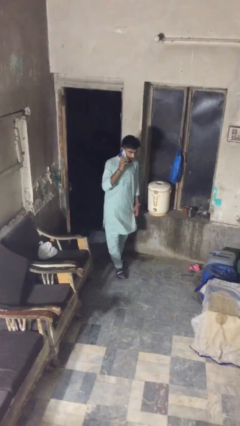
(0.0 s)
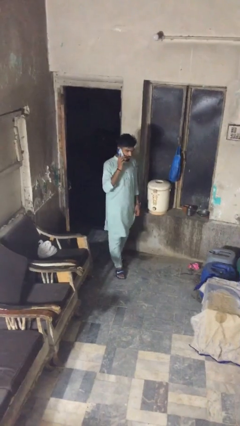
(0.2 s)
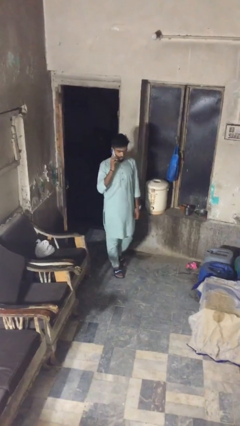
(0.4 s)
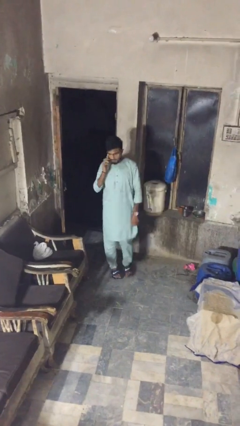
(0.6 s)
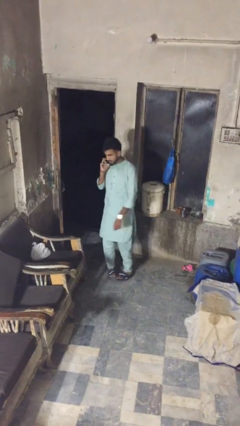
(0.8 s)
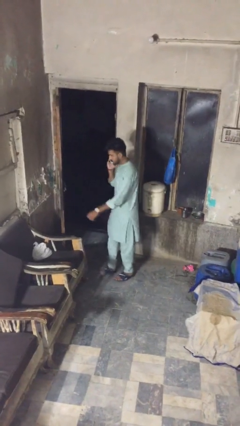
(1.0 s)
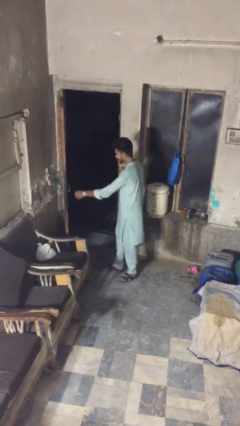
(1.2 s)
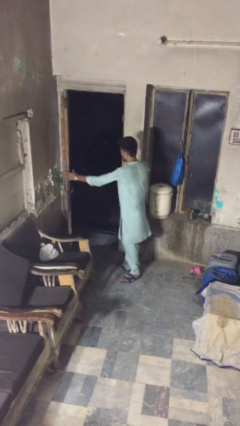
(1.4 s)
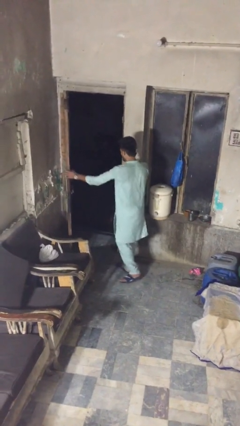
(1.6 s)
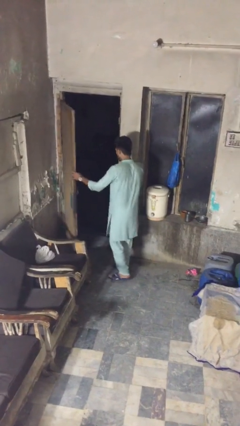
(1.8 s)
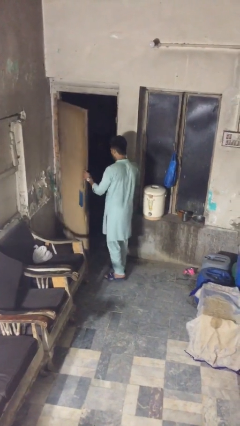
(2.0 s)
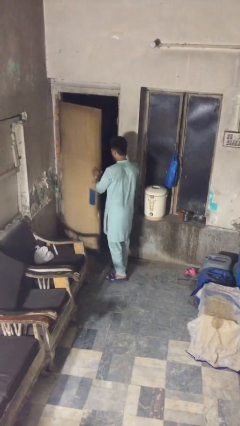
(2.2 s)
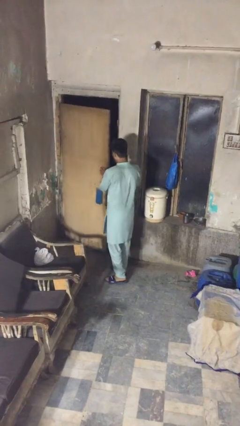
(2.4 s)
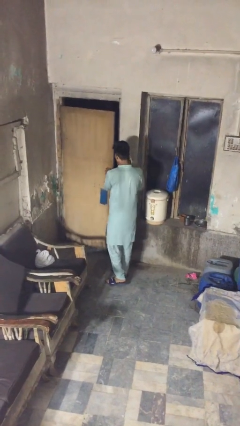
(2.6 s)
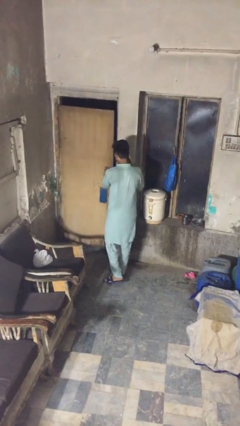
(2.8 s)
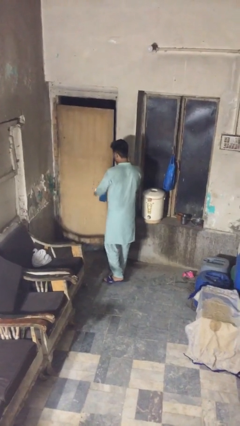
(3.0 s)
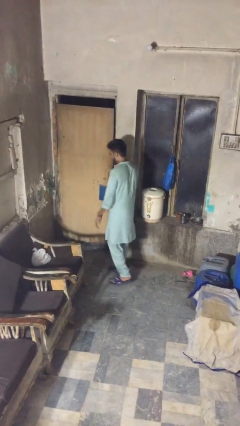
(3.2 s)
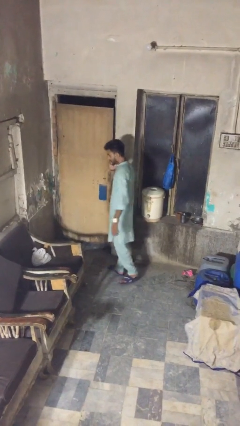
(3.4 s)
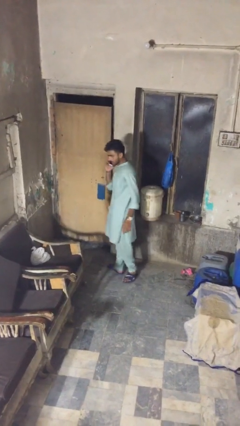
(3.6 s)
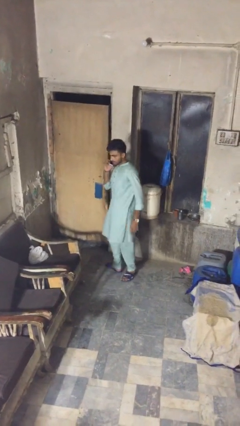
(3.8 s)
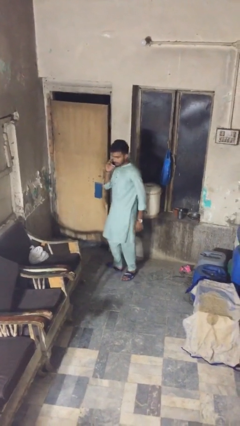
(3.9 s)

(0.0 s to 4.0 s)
person closes facility door

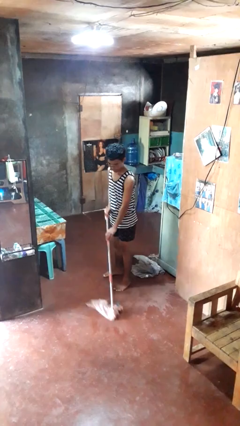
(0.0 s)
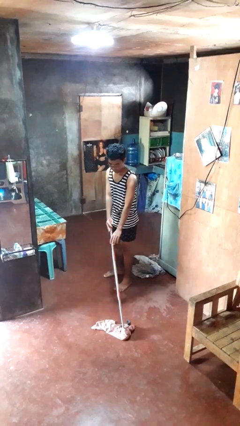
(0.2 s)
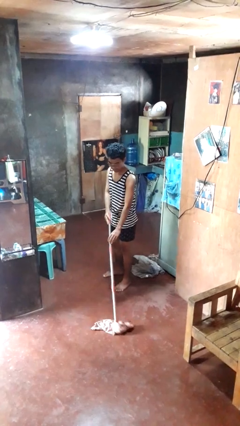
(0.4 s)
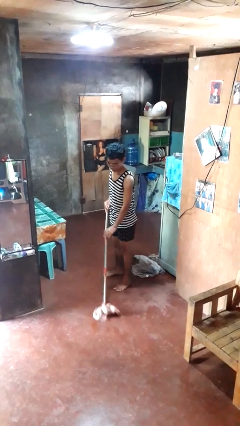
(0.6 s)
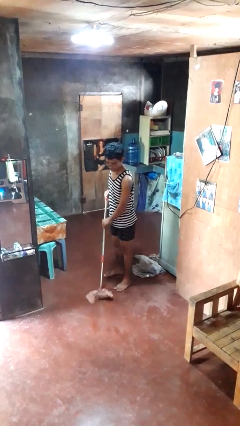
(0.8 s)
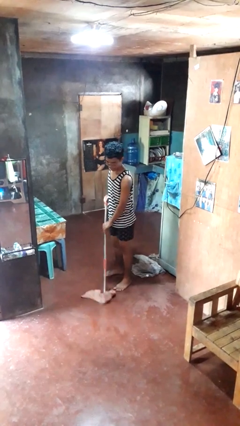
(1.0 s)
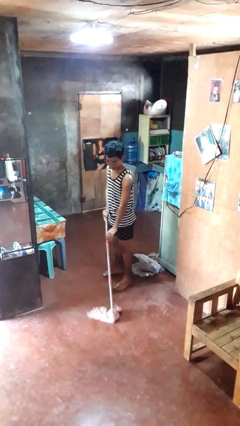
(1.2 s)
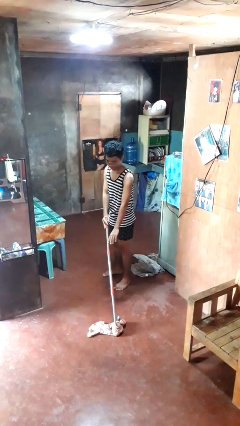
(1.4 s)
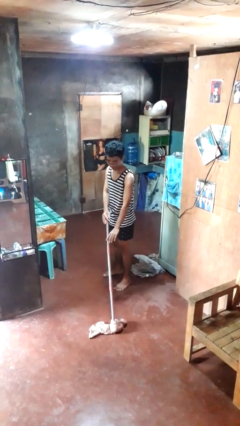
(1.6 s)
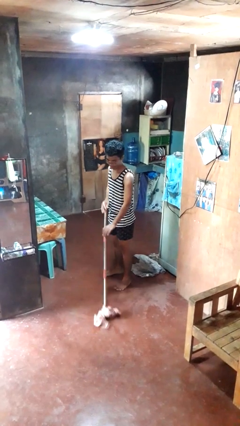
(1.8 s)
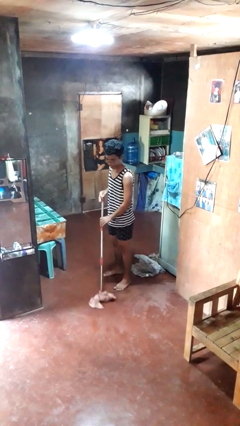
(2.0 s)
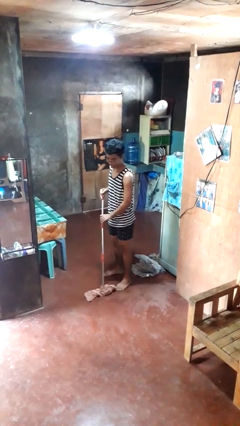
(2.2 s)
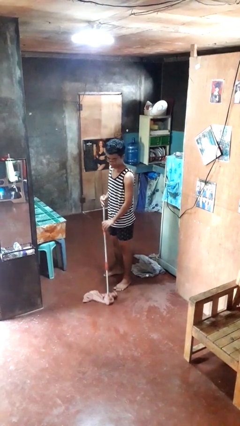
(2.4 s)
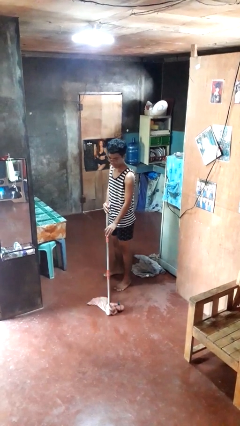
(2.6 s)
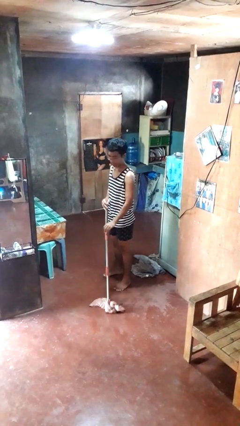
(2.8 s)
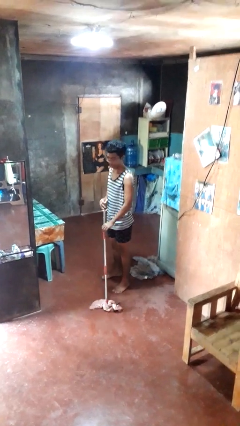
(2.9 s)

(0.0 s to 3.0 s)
person mops

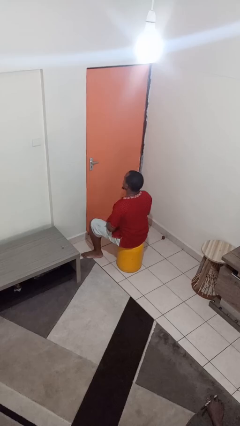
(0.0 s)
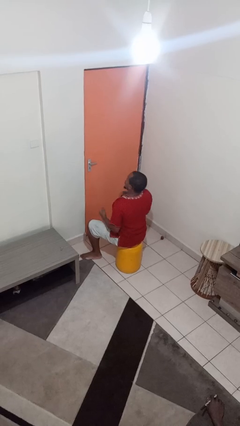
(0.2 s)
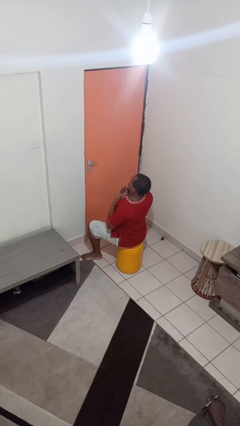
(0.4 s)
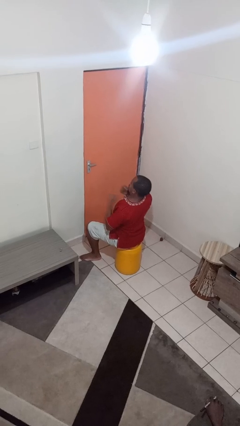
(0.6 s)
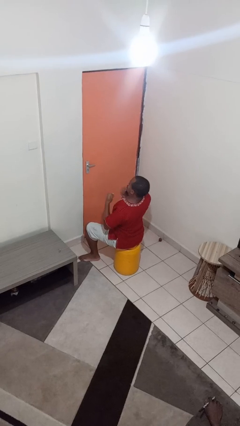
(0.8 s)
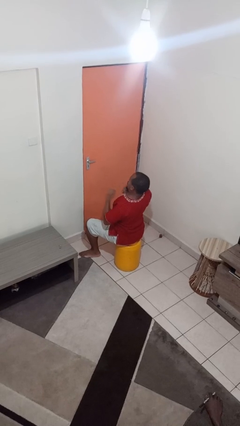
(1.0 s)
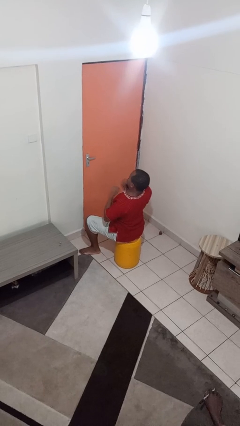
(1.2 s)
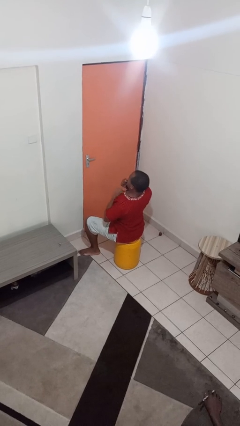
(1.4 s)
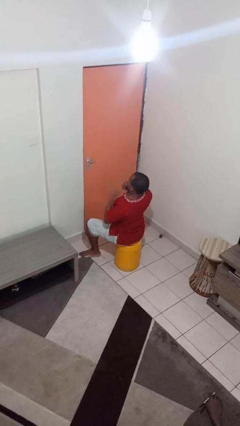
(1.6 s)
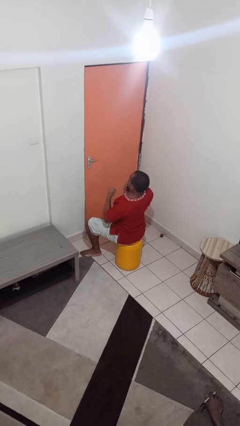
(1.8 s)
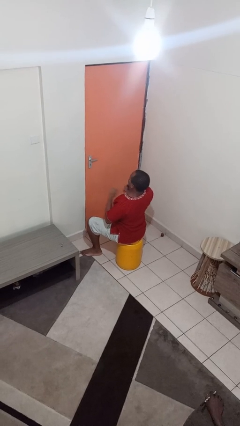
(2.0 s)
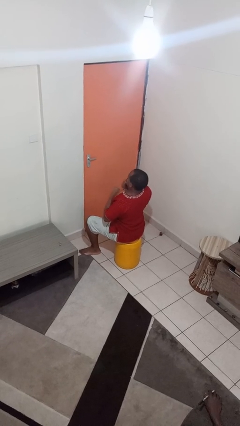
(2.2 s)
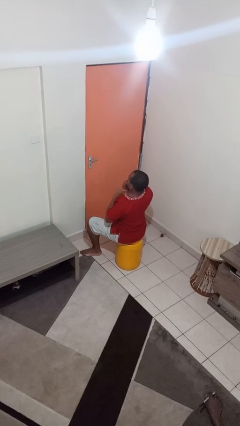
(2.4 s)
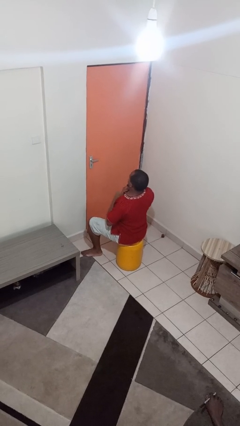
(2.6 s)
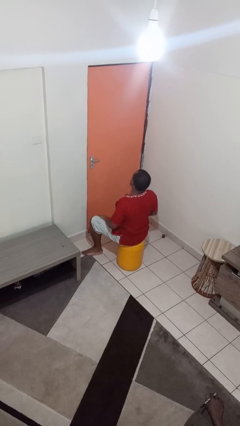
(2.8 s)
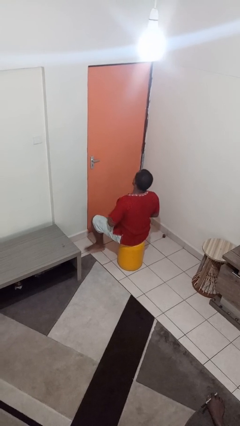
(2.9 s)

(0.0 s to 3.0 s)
person drums on chest

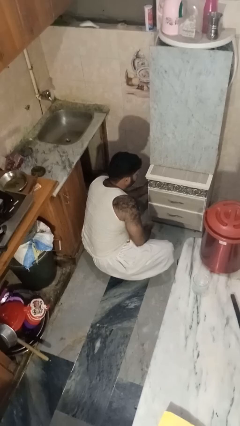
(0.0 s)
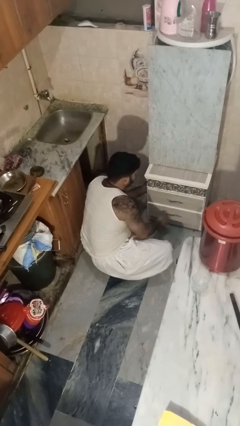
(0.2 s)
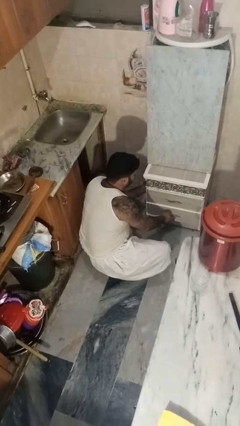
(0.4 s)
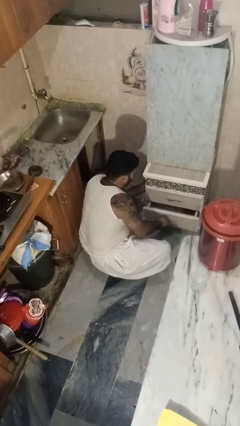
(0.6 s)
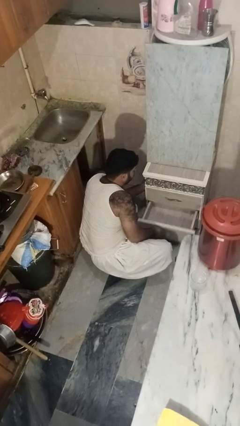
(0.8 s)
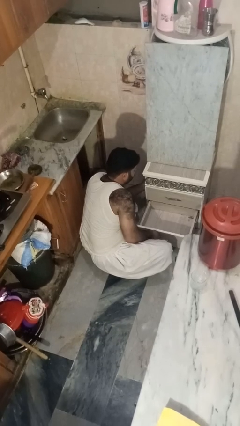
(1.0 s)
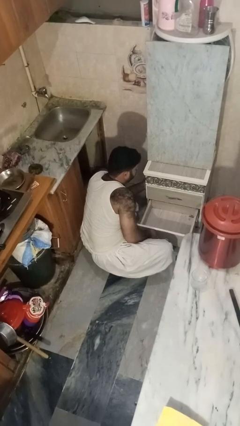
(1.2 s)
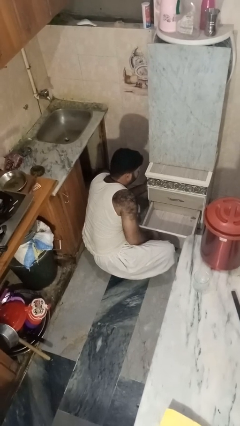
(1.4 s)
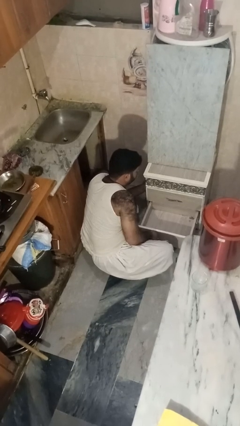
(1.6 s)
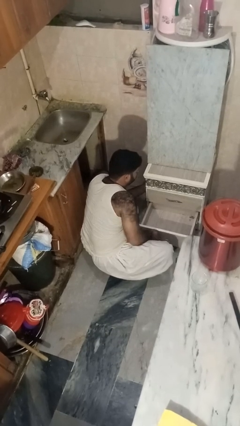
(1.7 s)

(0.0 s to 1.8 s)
person opens kitchen drawer

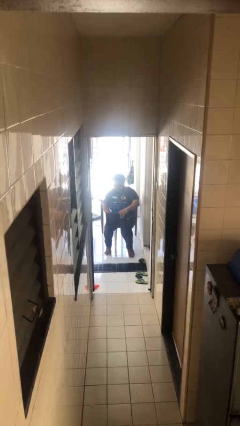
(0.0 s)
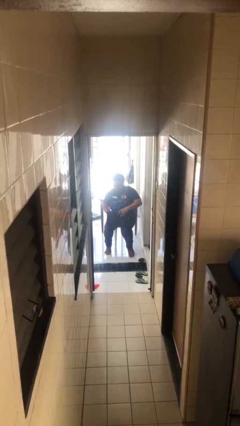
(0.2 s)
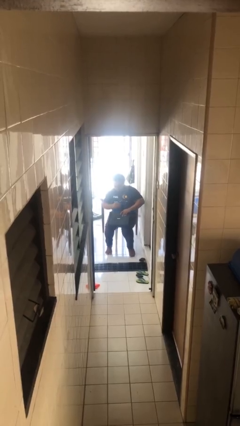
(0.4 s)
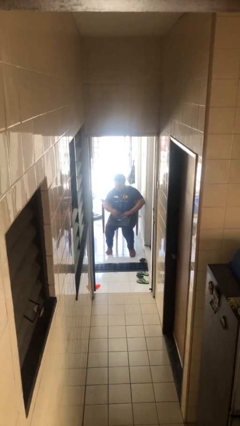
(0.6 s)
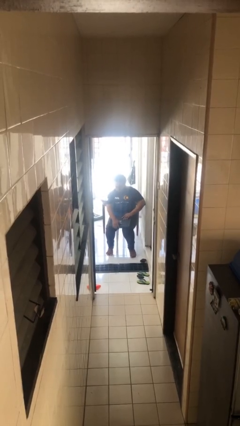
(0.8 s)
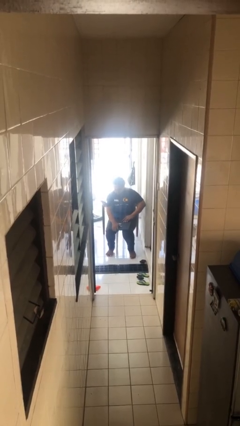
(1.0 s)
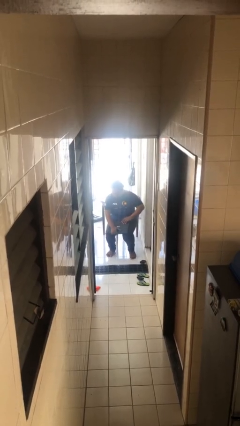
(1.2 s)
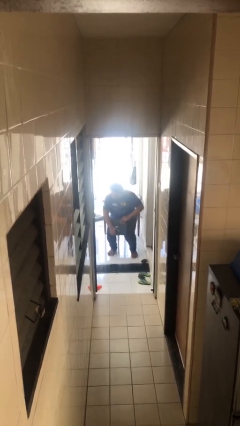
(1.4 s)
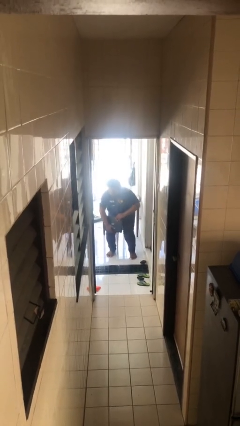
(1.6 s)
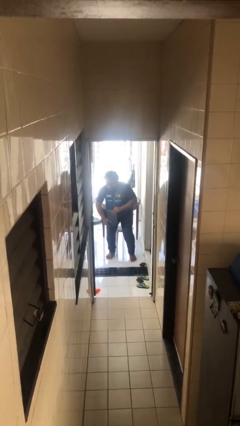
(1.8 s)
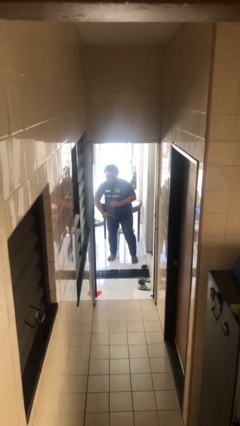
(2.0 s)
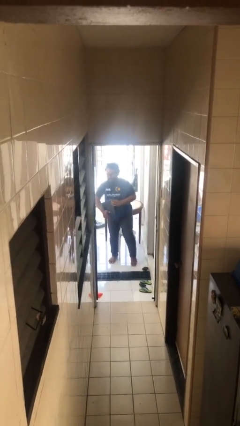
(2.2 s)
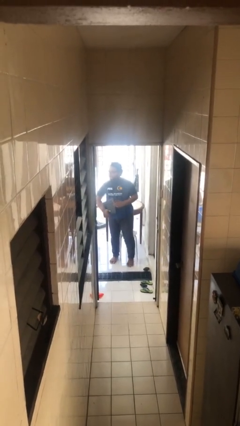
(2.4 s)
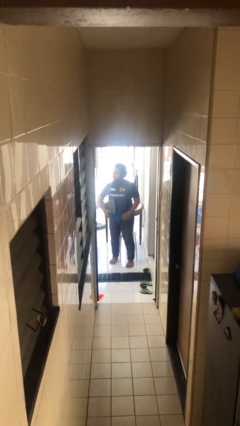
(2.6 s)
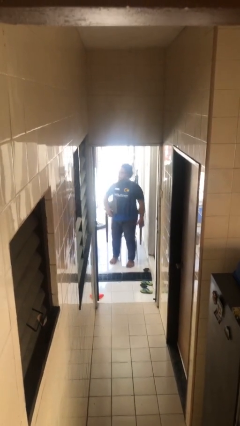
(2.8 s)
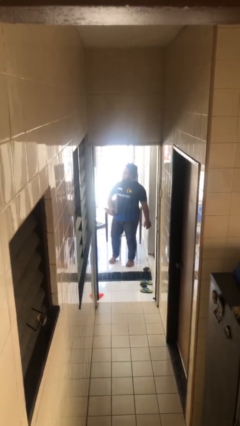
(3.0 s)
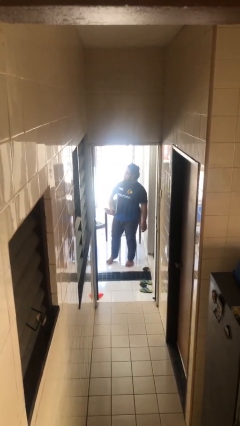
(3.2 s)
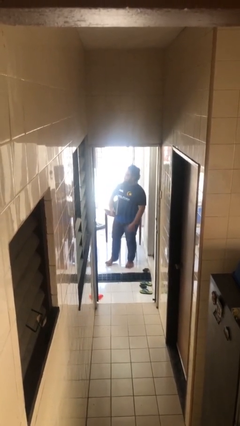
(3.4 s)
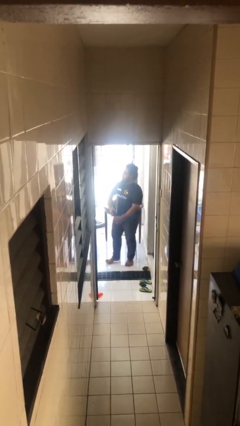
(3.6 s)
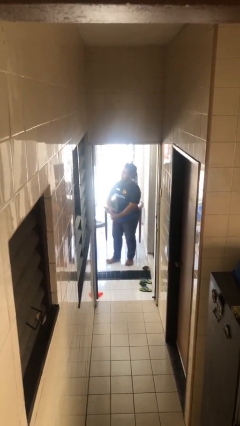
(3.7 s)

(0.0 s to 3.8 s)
person stands up

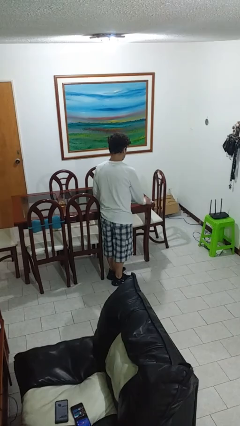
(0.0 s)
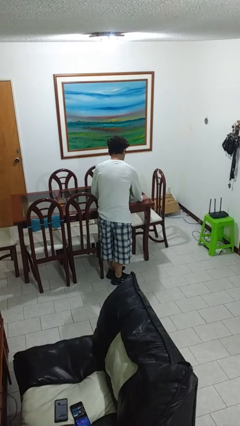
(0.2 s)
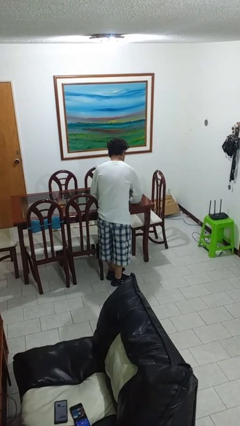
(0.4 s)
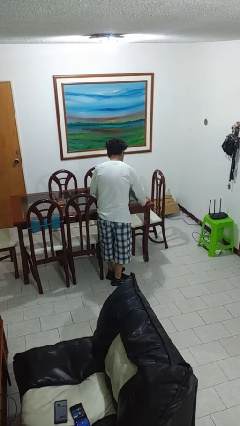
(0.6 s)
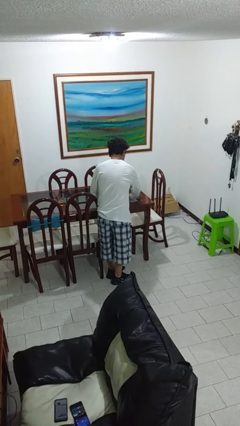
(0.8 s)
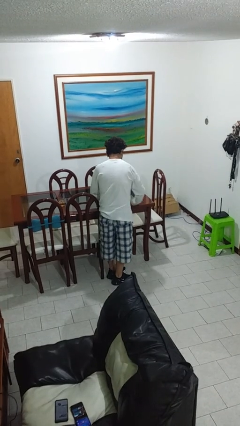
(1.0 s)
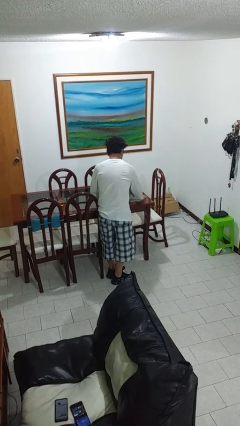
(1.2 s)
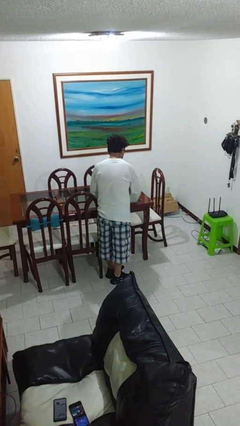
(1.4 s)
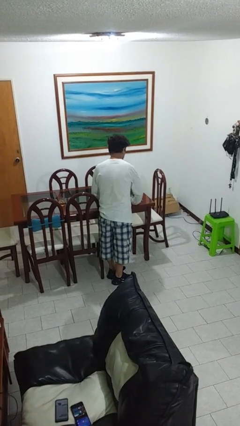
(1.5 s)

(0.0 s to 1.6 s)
person cleans table with rag

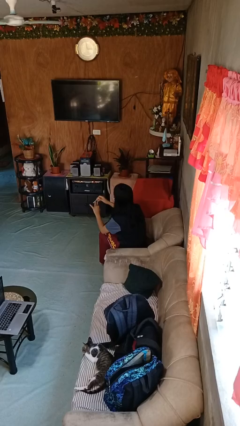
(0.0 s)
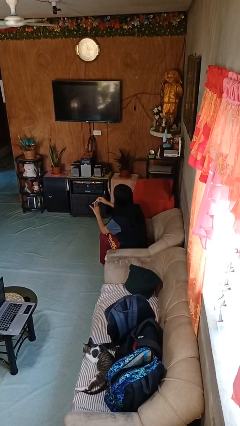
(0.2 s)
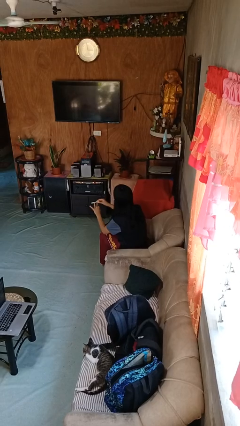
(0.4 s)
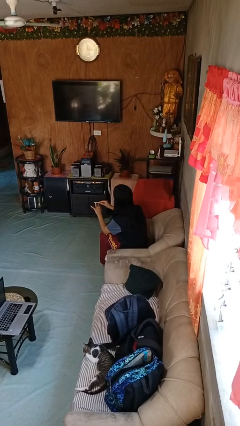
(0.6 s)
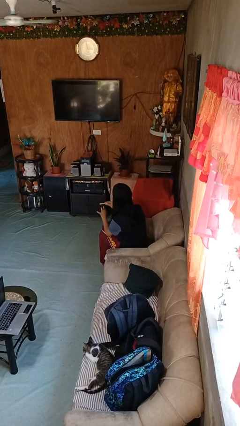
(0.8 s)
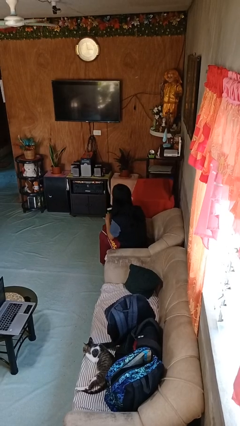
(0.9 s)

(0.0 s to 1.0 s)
person files fingernails
